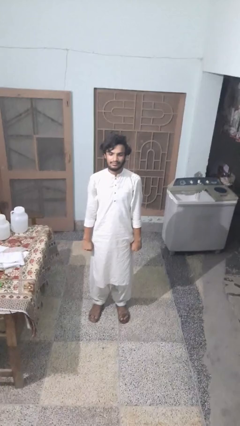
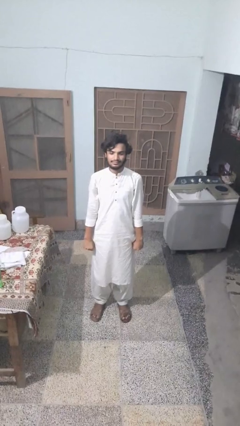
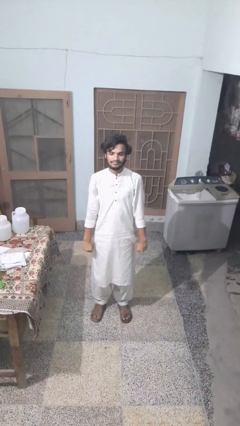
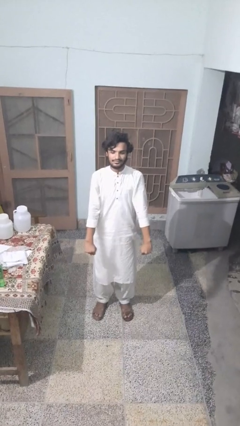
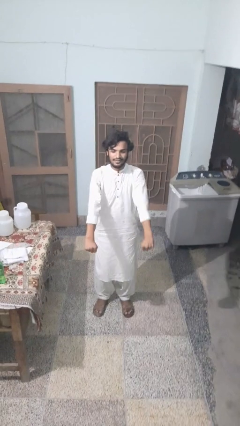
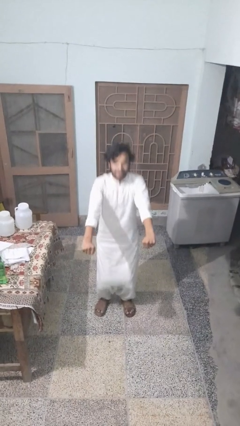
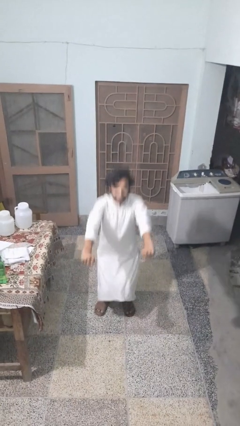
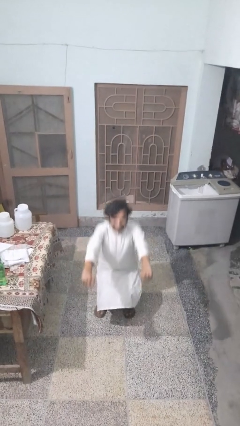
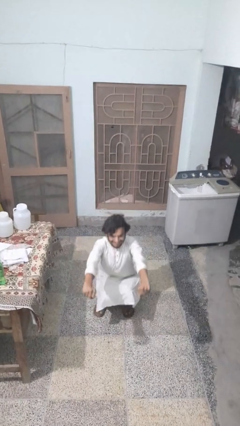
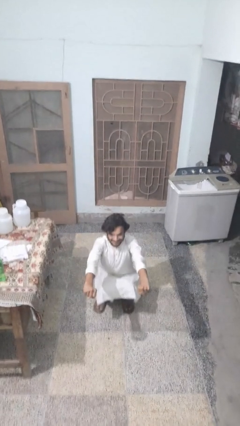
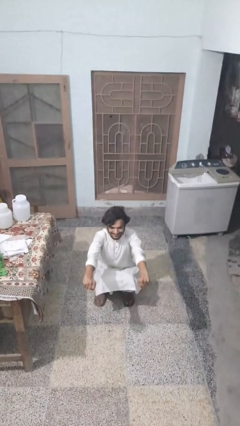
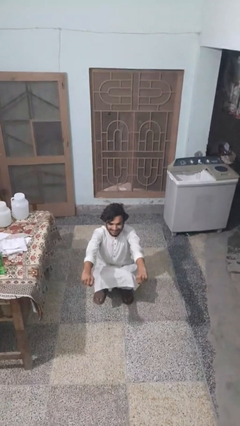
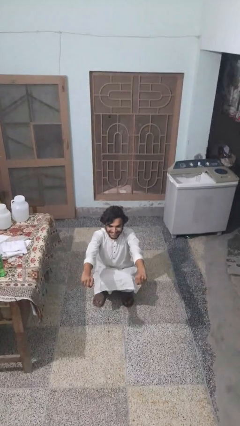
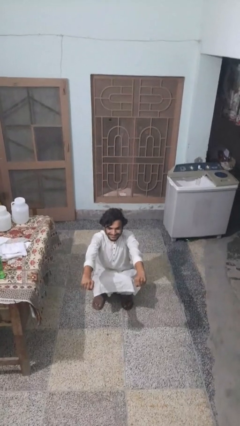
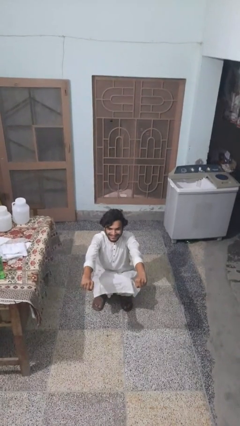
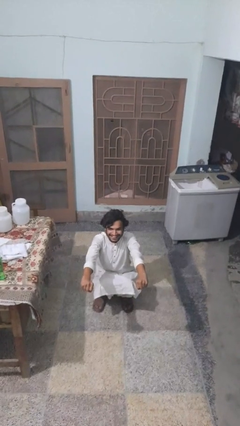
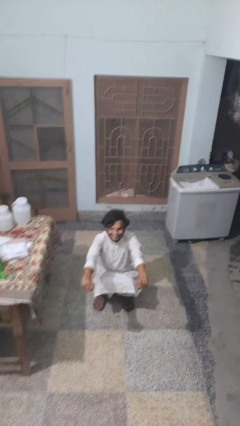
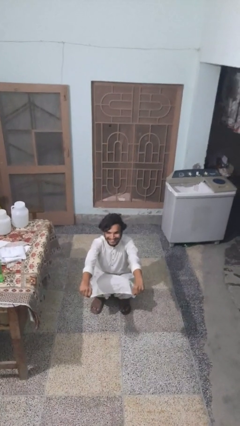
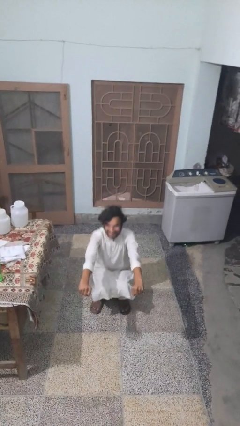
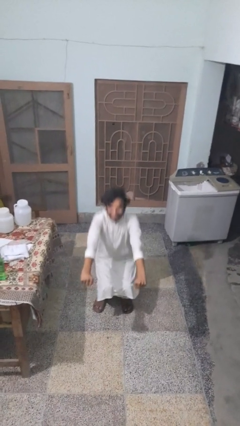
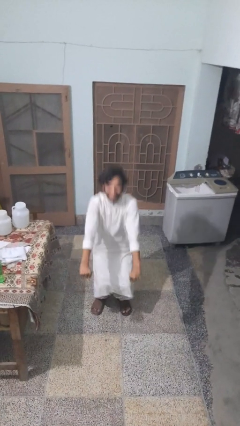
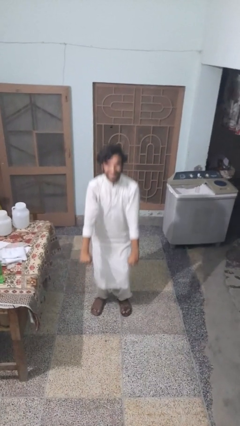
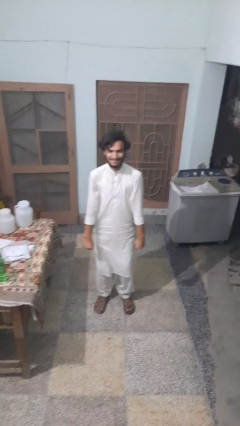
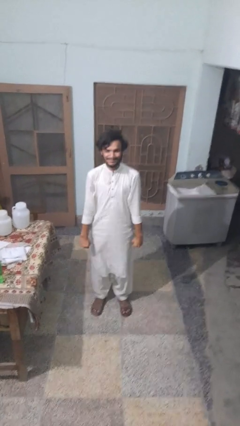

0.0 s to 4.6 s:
person squats

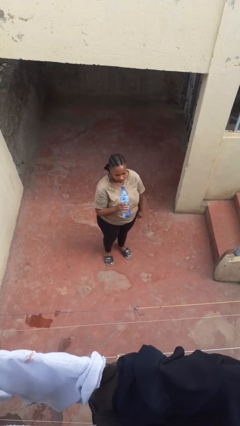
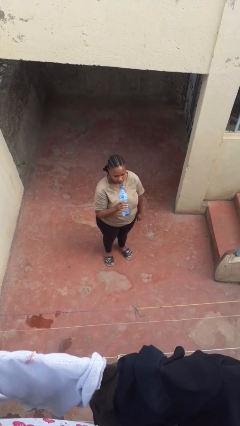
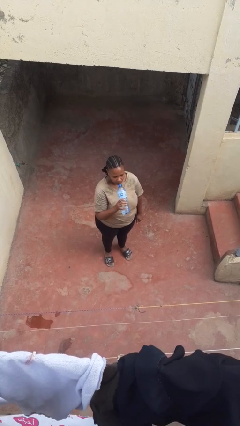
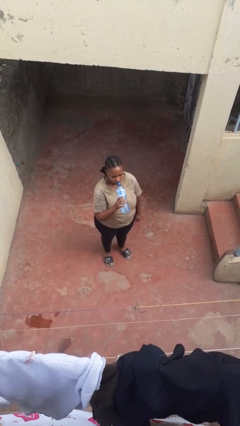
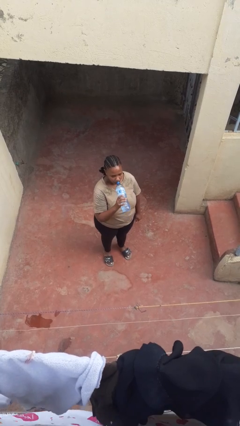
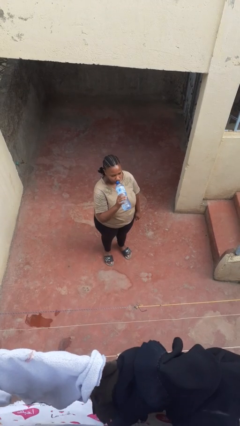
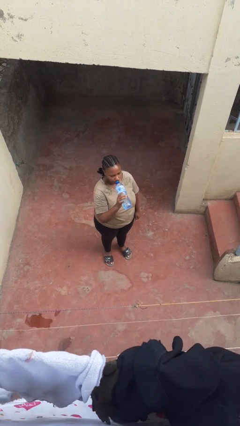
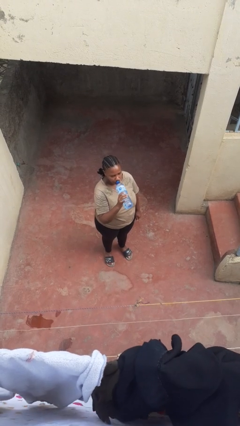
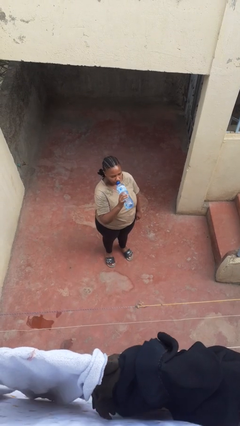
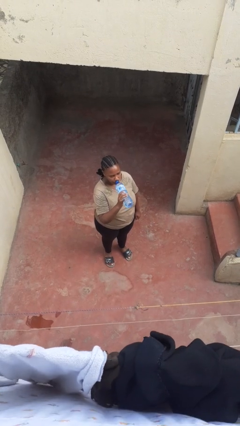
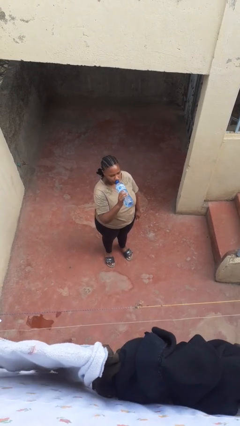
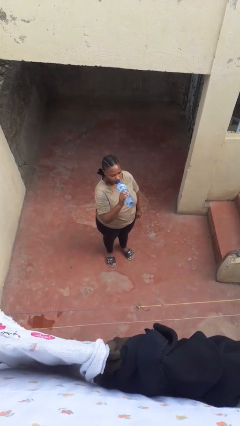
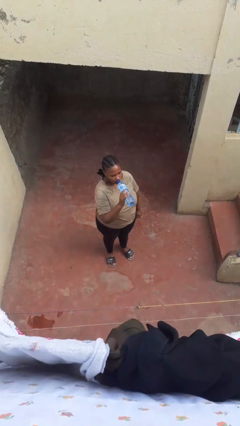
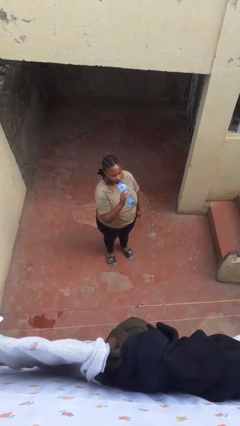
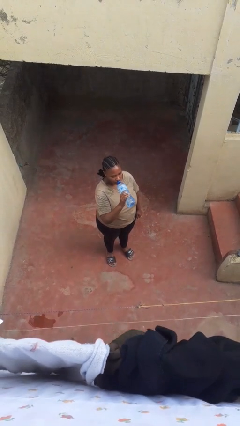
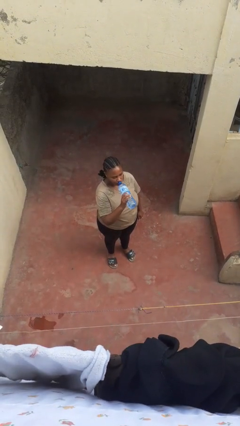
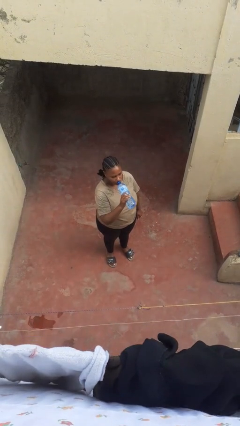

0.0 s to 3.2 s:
person drinks from bottle

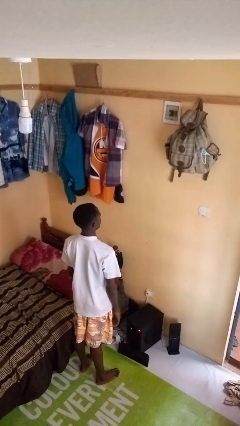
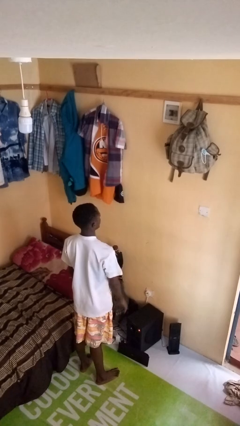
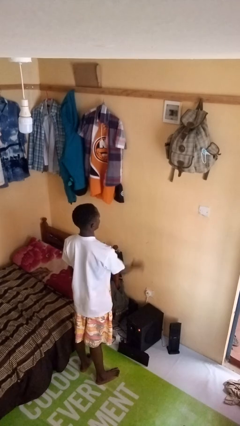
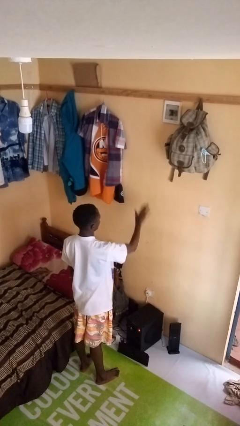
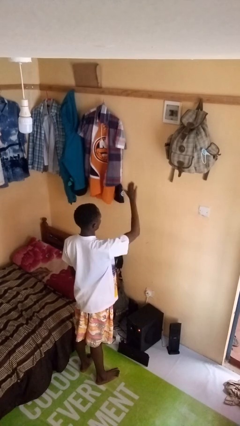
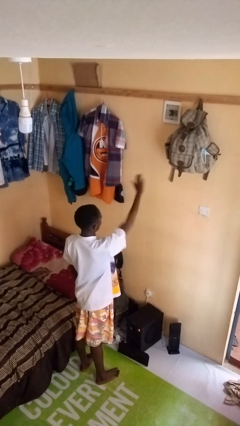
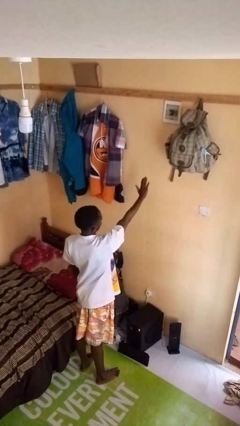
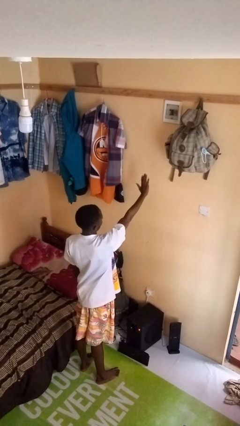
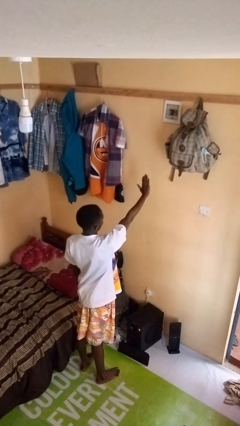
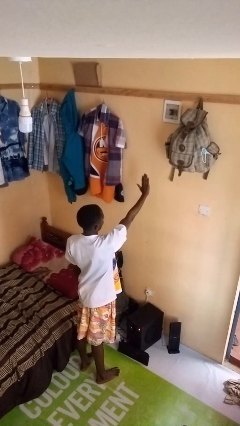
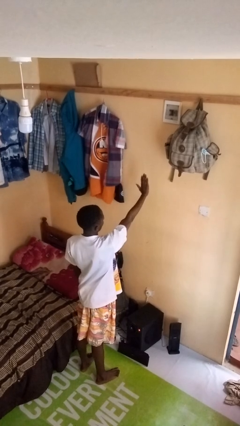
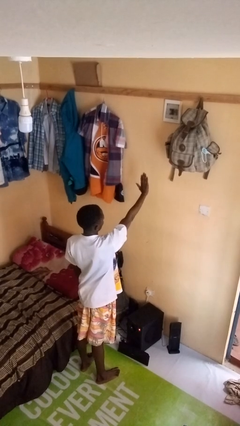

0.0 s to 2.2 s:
person gestures stop

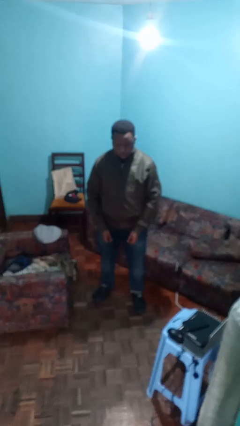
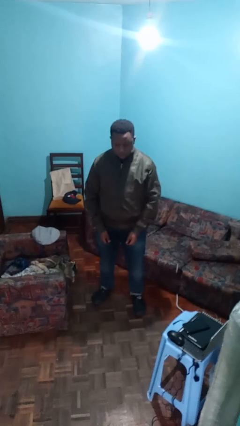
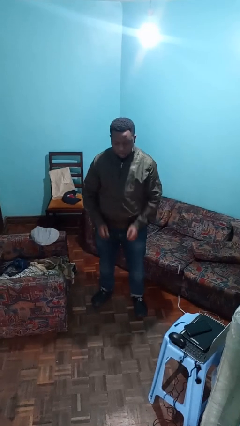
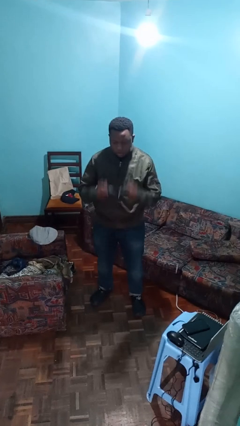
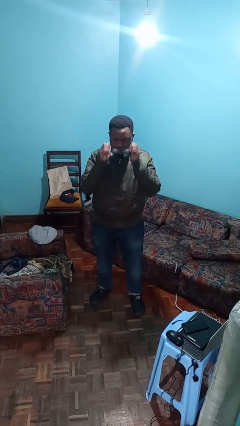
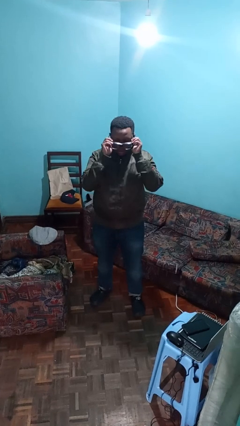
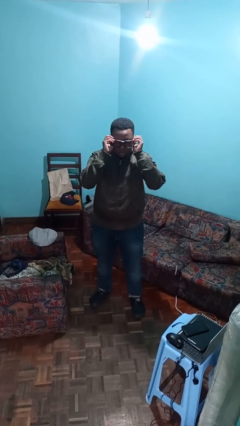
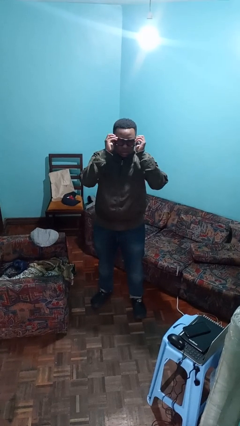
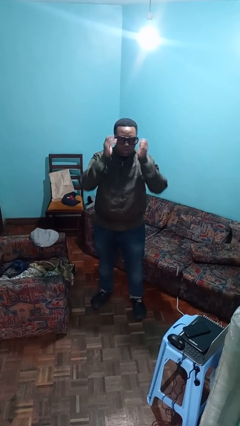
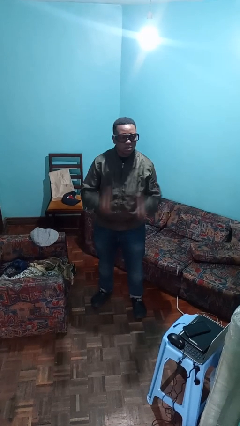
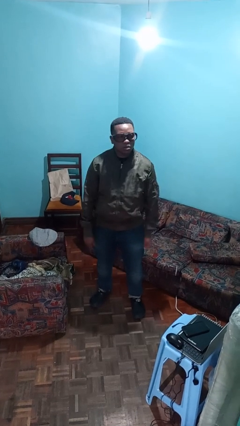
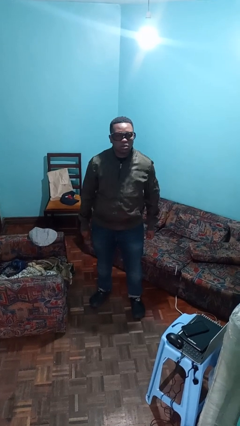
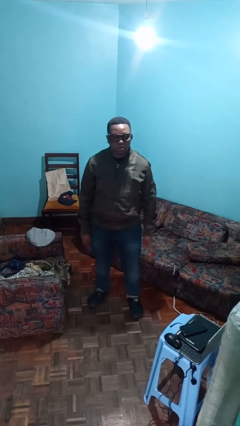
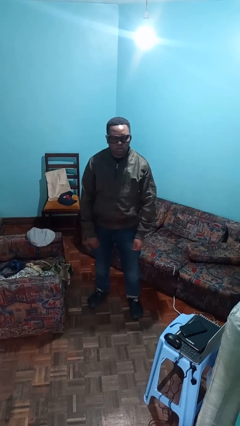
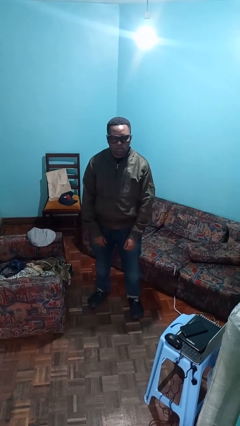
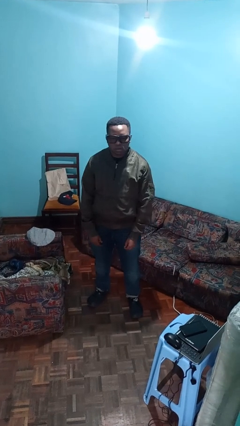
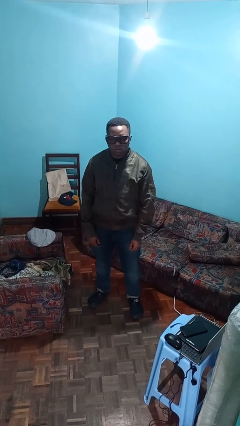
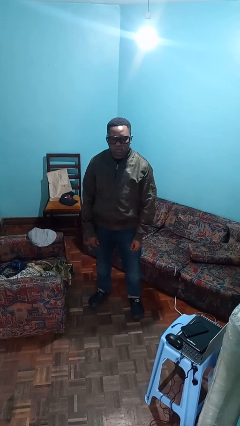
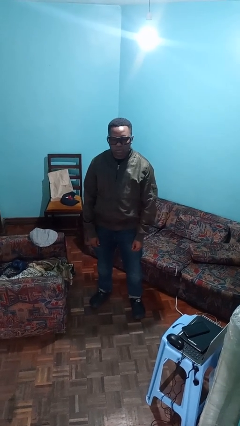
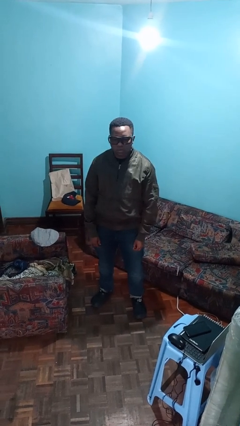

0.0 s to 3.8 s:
person puts on glasses

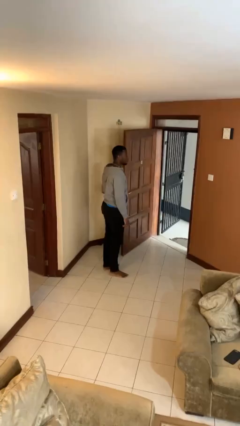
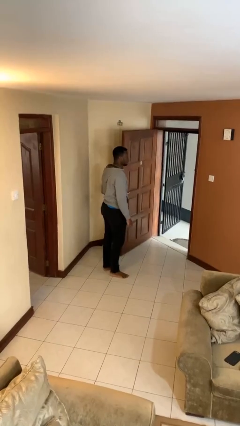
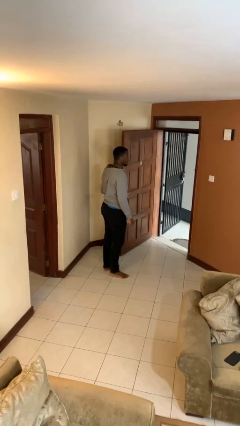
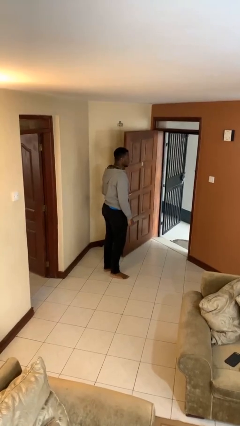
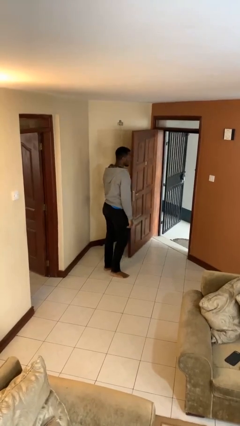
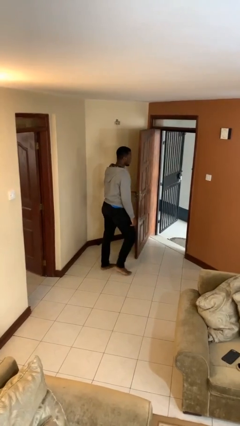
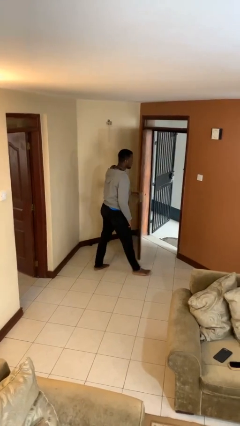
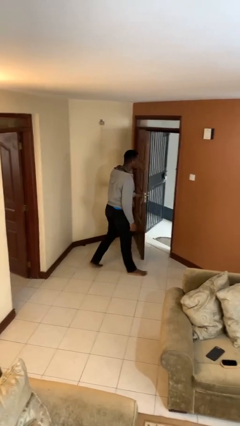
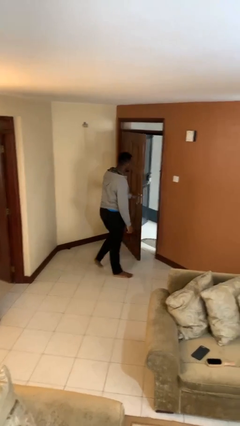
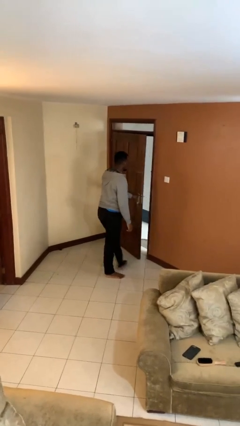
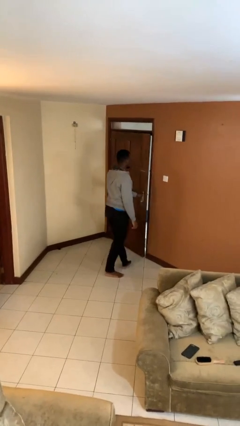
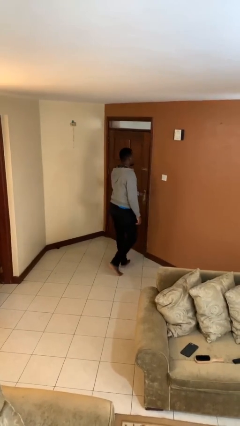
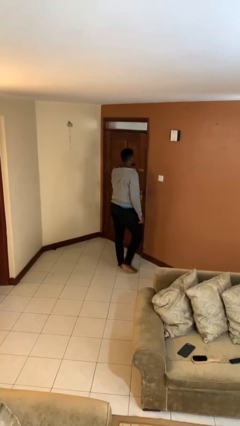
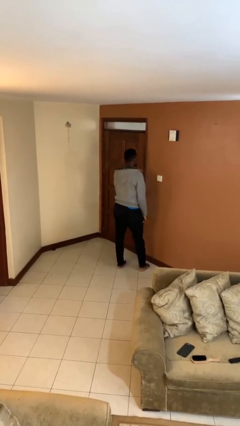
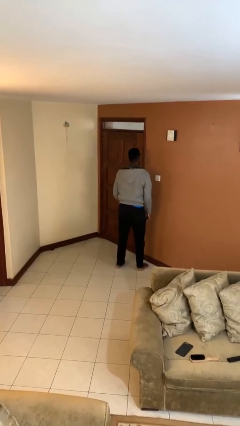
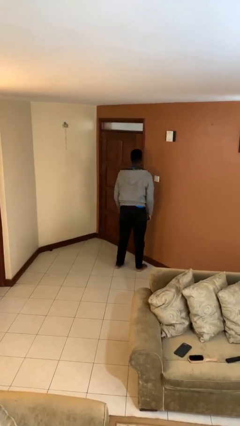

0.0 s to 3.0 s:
person closes facility door

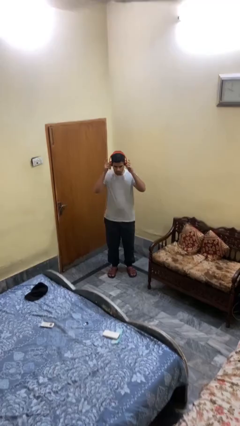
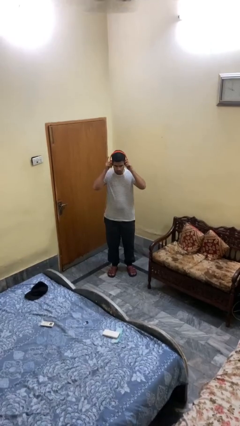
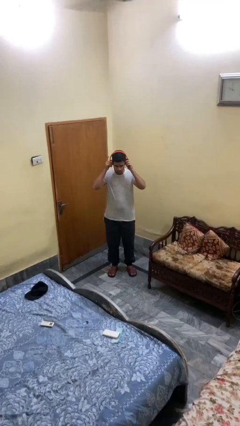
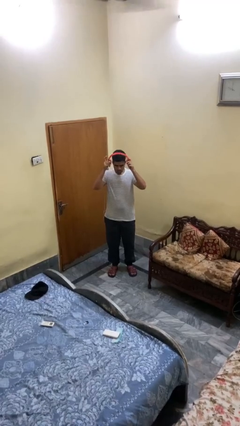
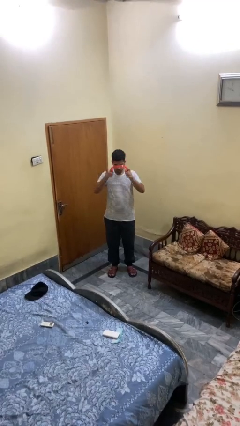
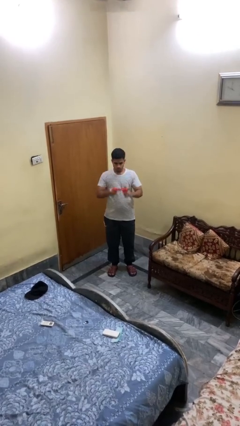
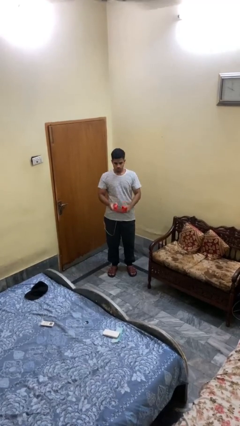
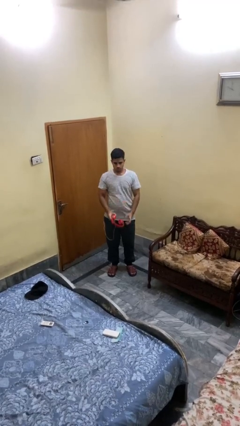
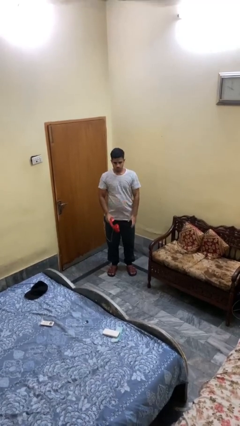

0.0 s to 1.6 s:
person takes off headphones
